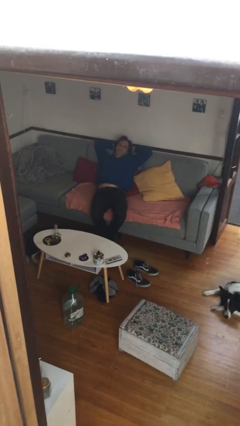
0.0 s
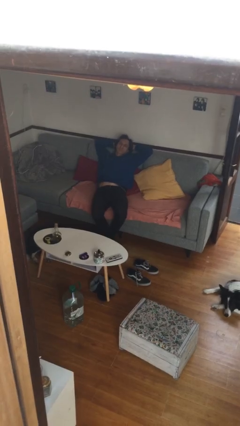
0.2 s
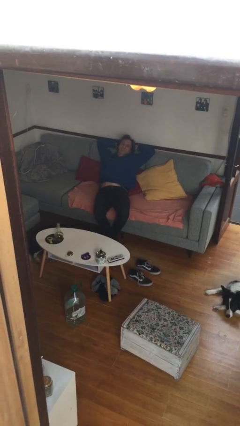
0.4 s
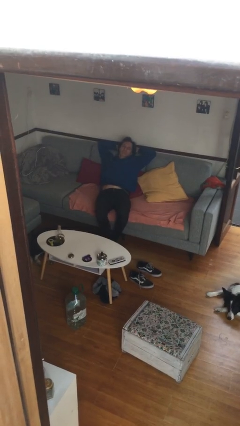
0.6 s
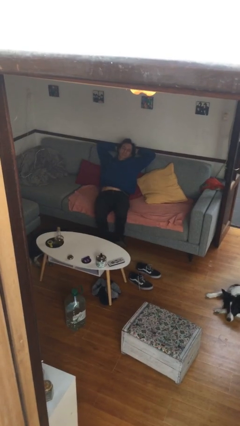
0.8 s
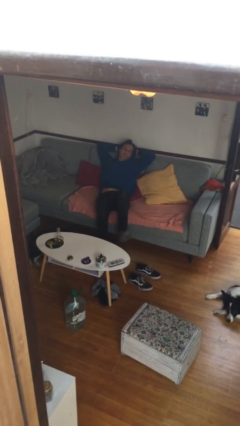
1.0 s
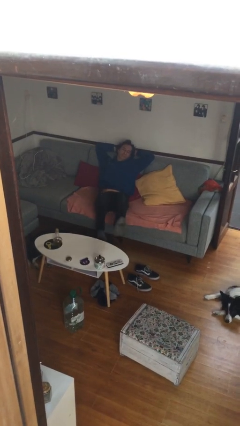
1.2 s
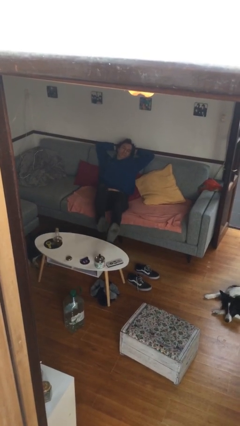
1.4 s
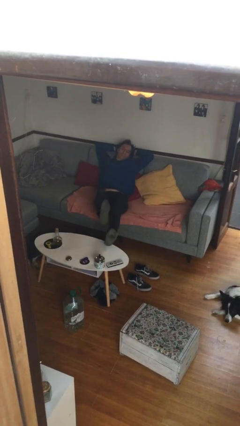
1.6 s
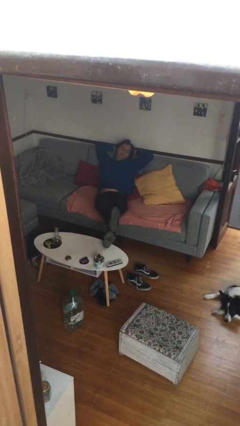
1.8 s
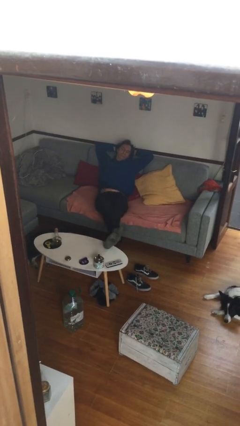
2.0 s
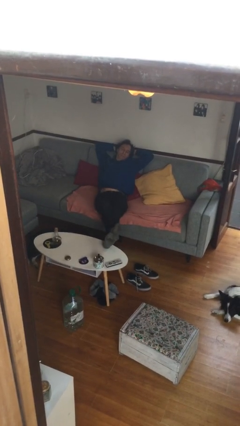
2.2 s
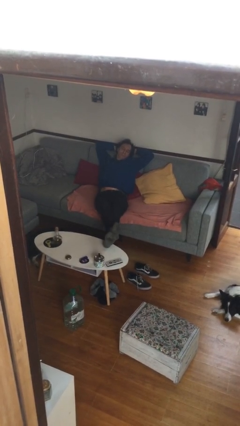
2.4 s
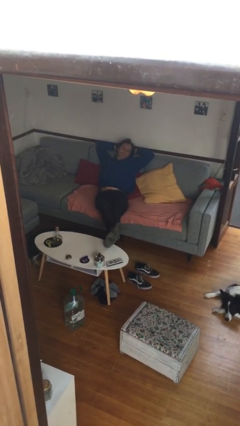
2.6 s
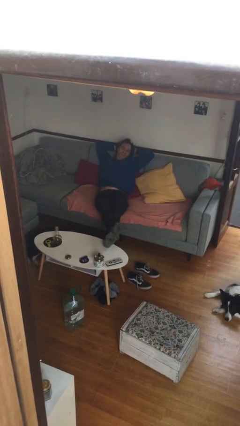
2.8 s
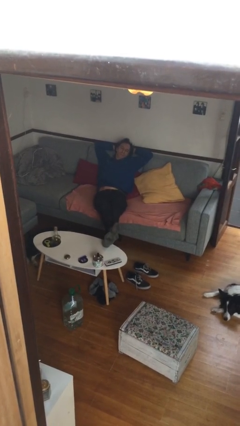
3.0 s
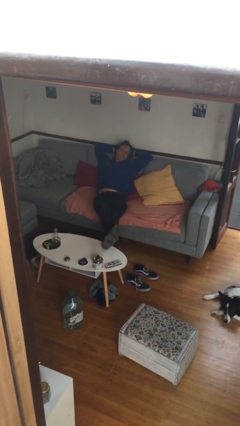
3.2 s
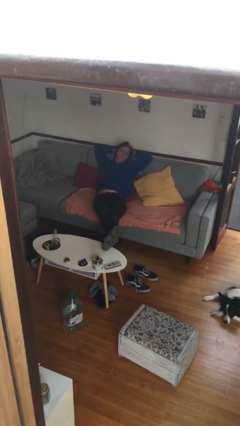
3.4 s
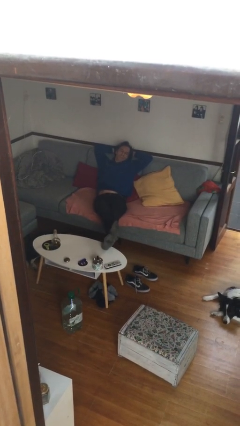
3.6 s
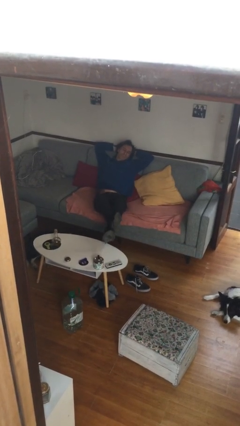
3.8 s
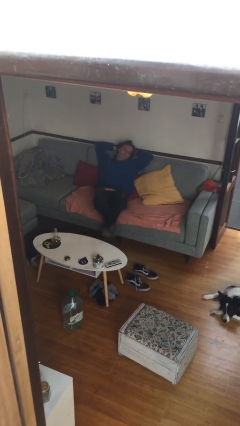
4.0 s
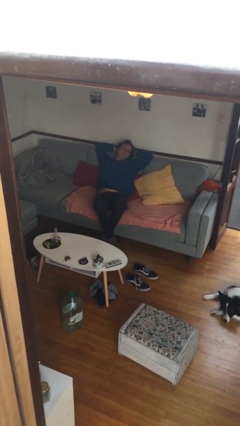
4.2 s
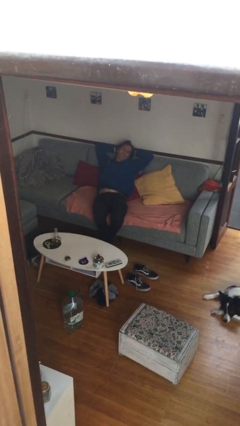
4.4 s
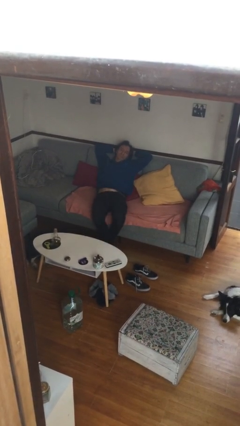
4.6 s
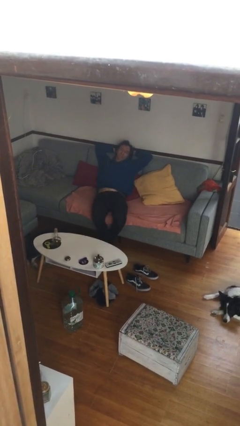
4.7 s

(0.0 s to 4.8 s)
person puts feet up

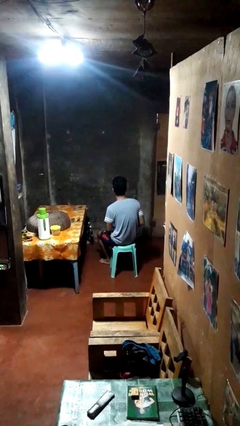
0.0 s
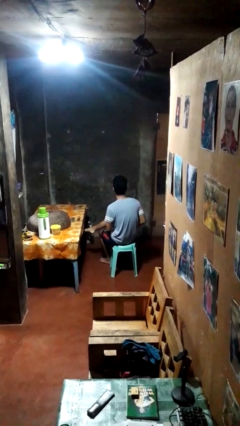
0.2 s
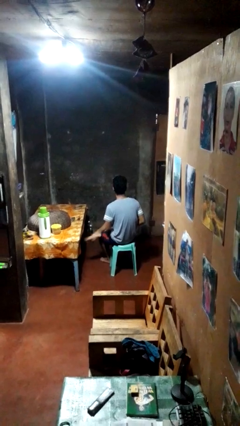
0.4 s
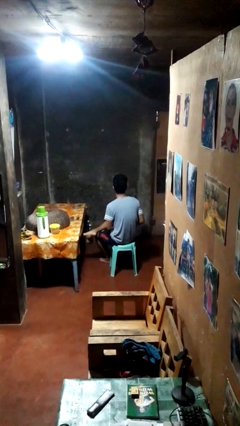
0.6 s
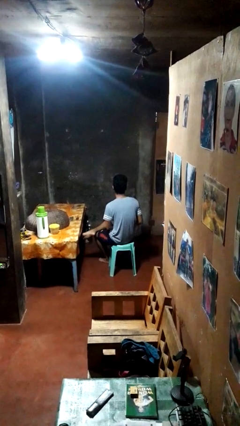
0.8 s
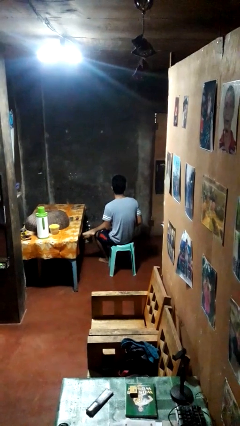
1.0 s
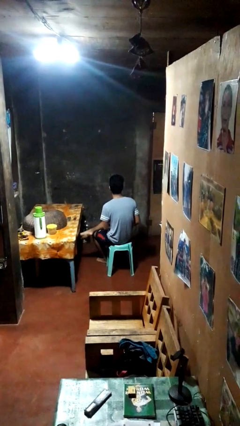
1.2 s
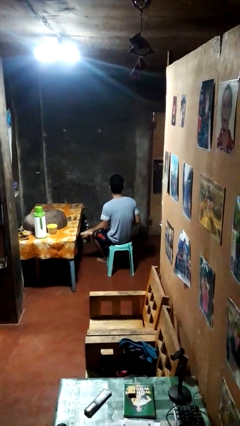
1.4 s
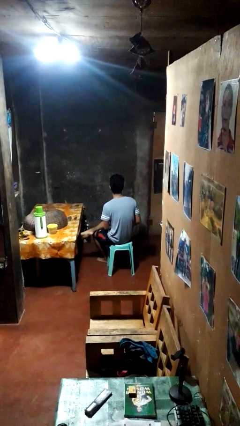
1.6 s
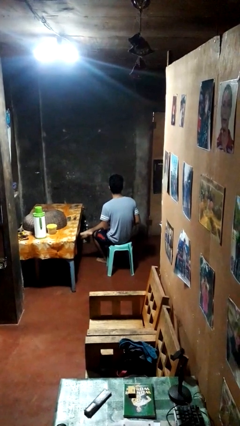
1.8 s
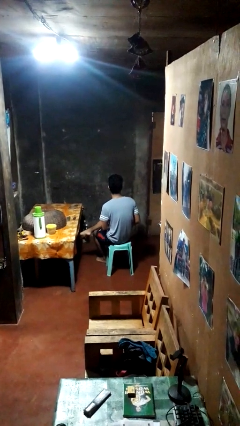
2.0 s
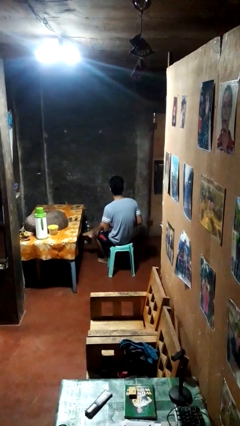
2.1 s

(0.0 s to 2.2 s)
person crosses legs

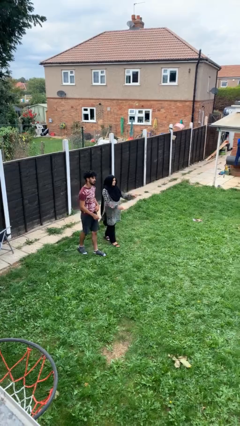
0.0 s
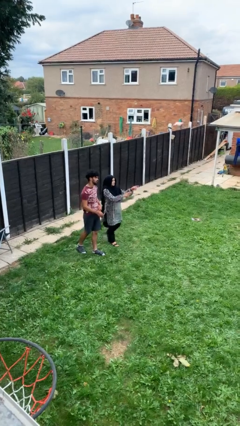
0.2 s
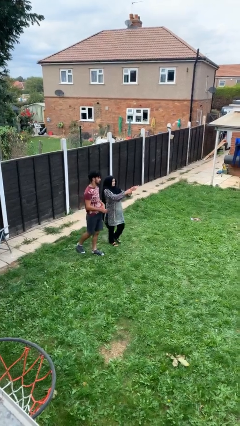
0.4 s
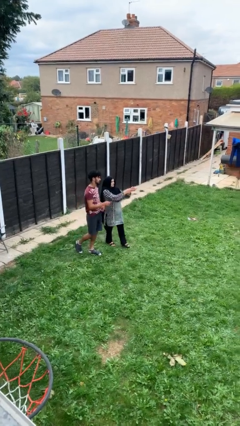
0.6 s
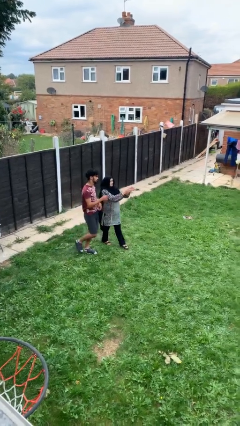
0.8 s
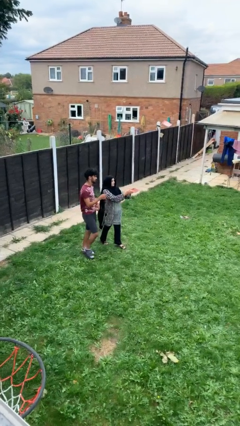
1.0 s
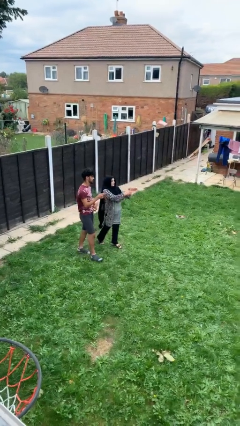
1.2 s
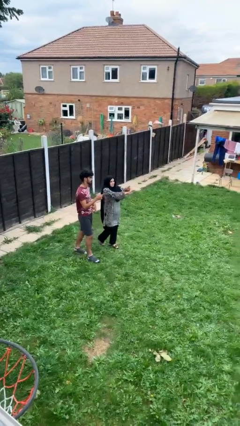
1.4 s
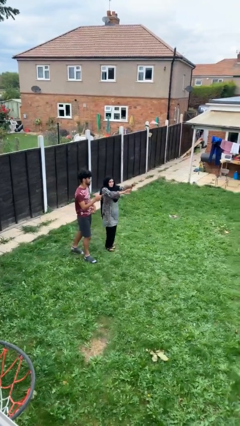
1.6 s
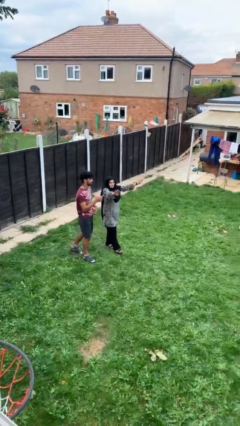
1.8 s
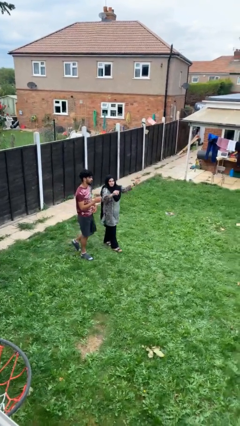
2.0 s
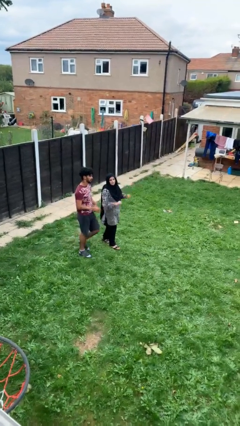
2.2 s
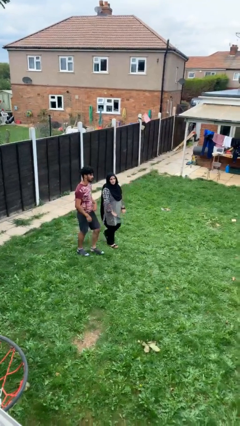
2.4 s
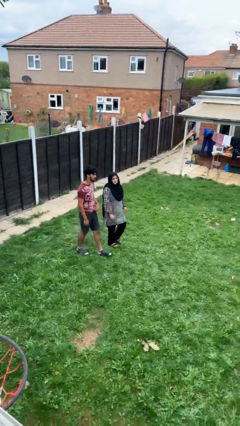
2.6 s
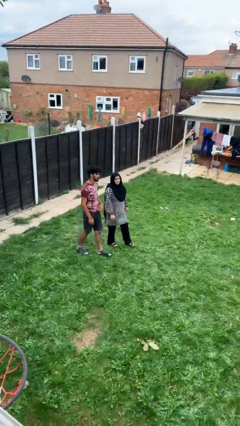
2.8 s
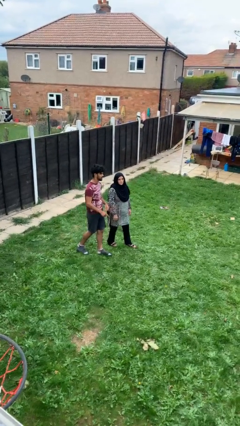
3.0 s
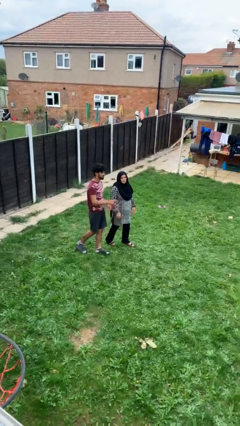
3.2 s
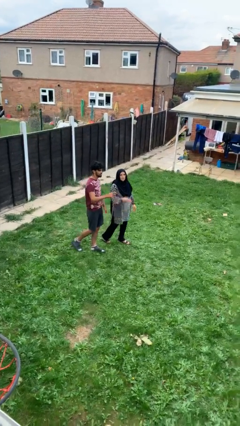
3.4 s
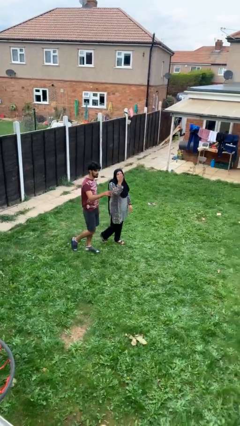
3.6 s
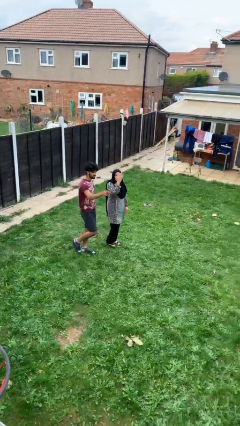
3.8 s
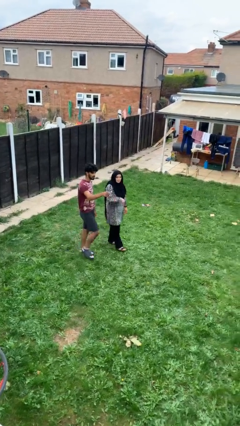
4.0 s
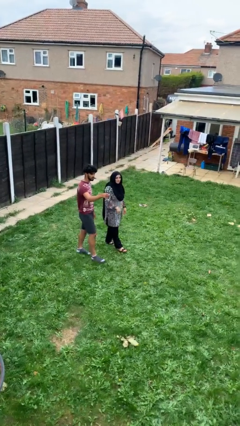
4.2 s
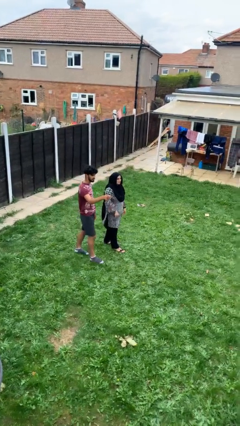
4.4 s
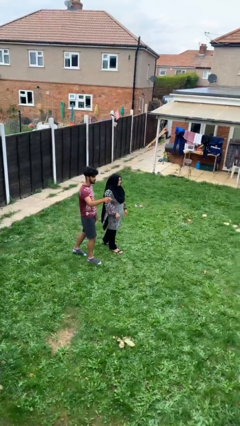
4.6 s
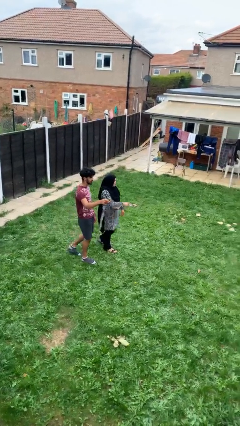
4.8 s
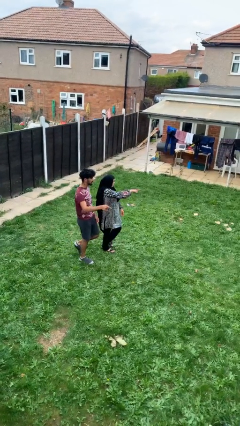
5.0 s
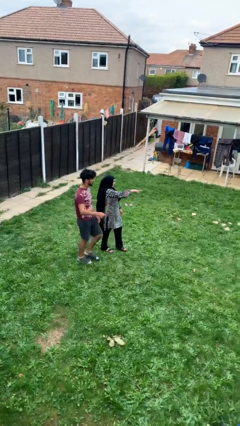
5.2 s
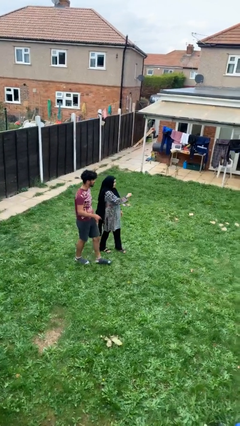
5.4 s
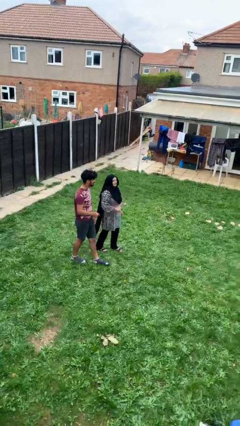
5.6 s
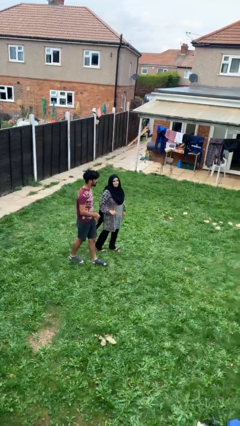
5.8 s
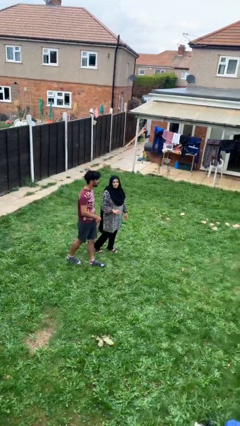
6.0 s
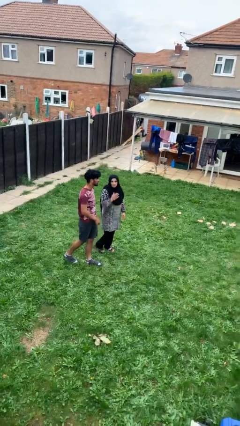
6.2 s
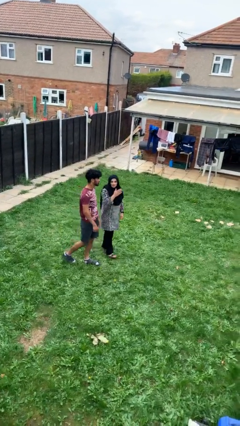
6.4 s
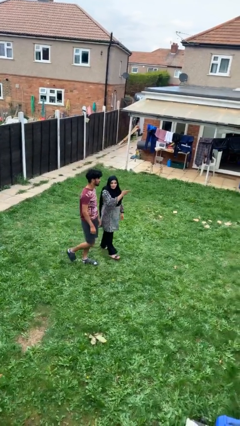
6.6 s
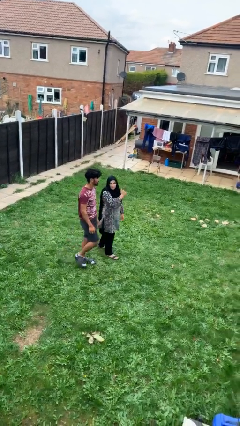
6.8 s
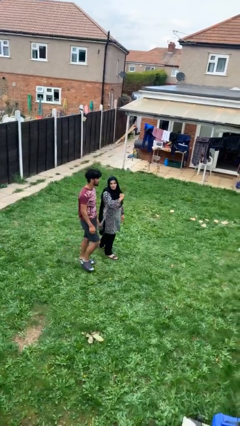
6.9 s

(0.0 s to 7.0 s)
person talks to person

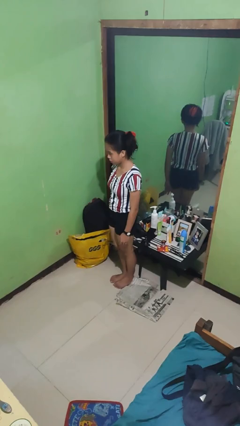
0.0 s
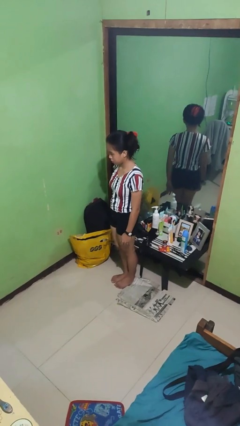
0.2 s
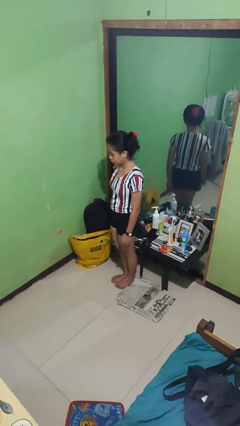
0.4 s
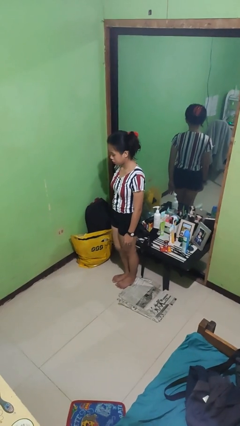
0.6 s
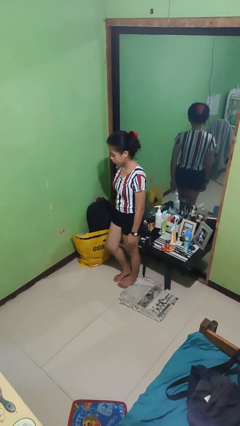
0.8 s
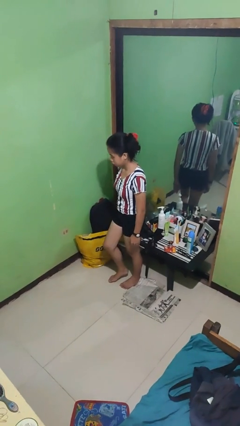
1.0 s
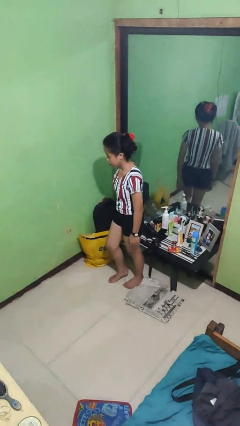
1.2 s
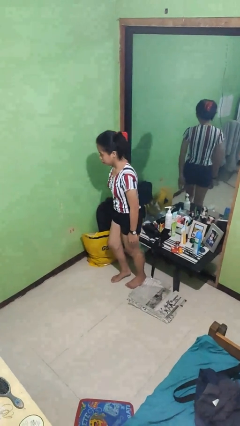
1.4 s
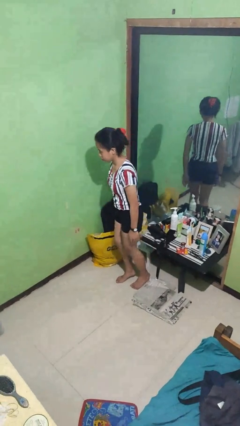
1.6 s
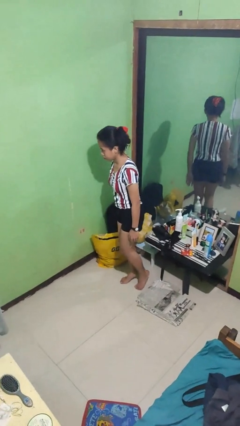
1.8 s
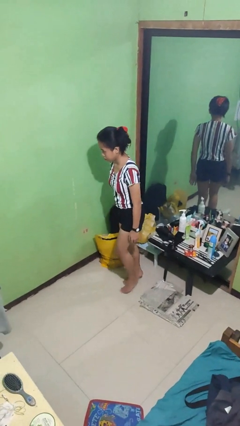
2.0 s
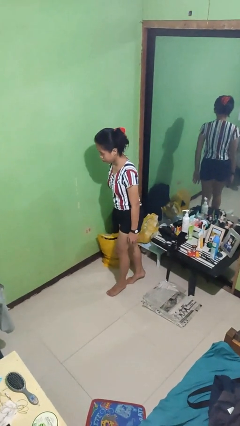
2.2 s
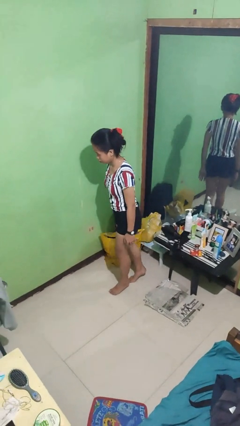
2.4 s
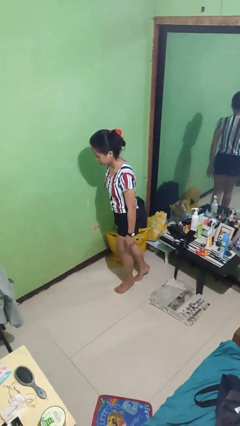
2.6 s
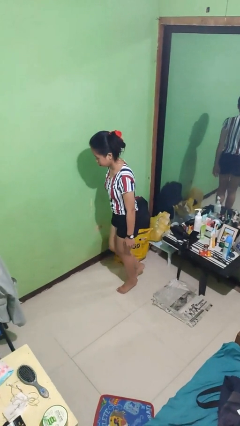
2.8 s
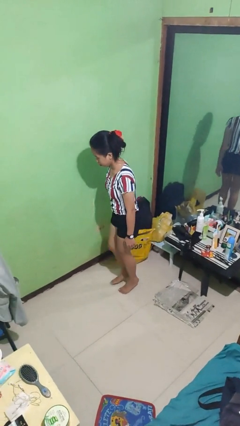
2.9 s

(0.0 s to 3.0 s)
person walks tiptoe

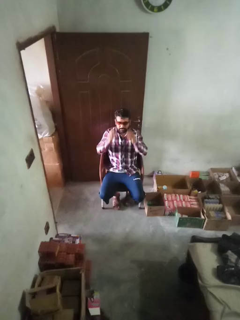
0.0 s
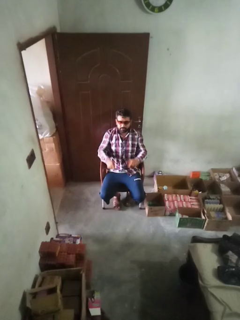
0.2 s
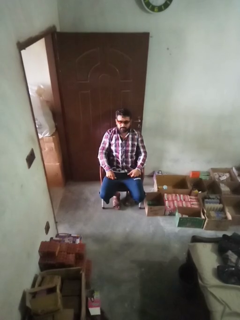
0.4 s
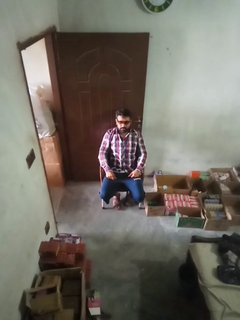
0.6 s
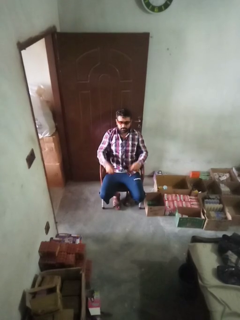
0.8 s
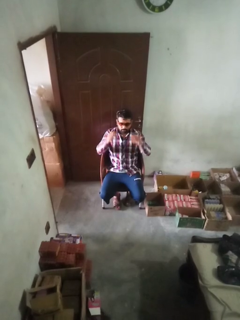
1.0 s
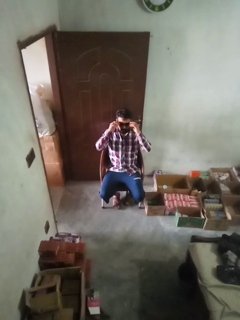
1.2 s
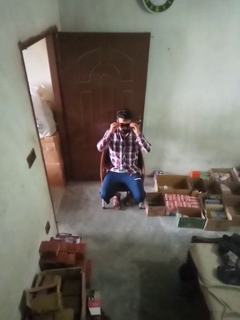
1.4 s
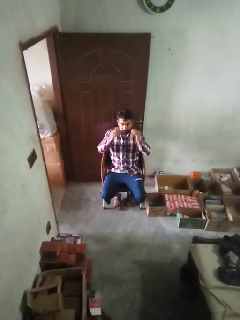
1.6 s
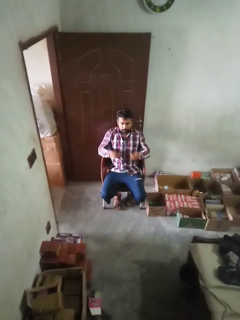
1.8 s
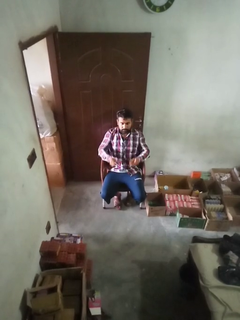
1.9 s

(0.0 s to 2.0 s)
person takes off sunglasses
